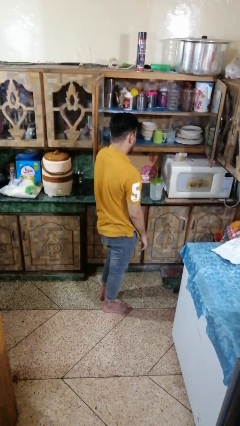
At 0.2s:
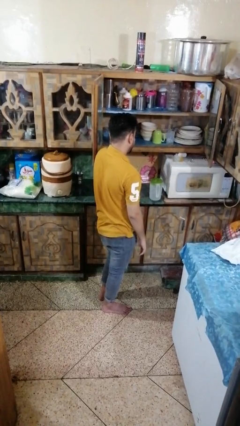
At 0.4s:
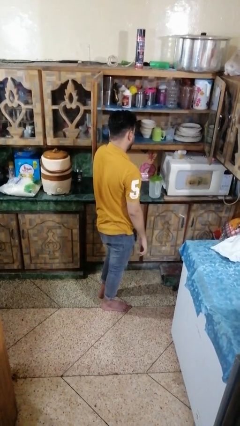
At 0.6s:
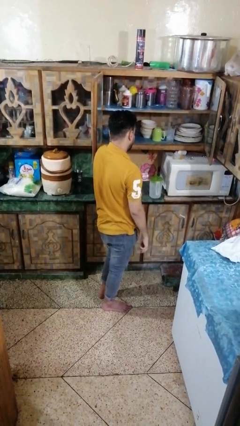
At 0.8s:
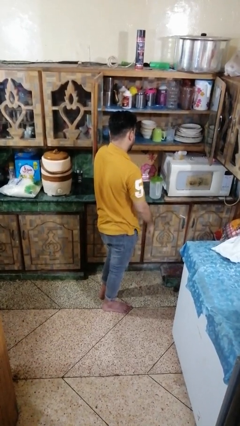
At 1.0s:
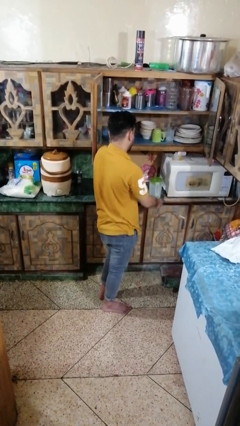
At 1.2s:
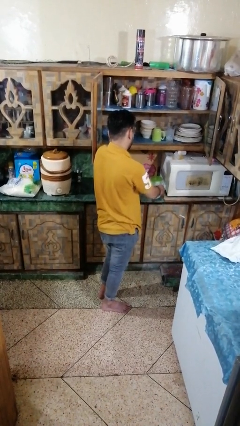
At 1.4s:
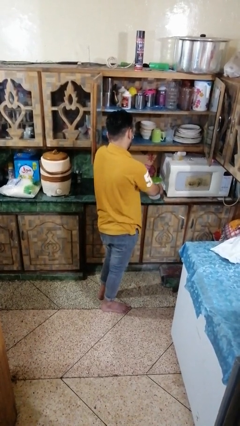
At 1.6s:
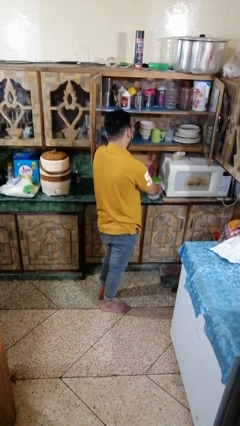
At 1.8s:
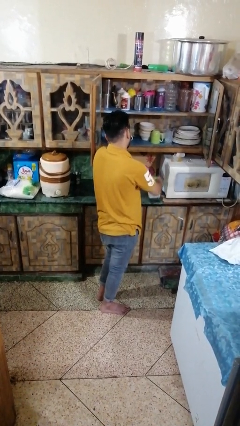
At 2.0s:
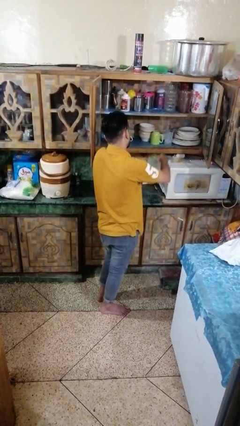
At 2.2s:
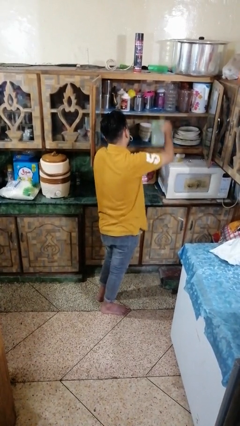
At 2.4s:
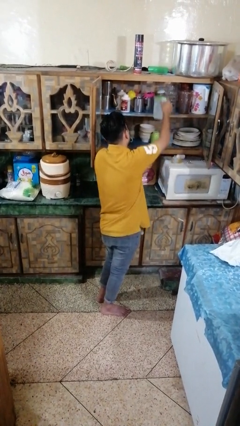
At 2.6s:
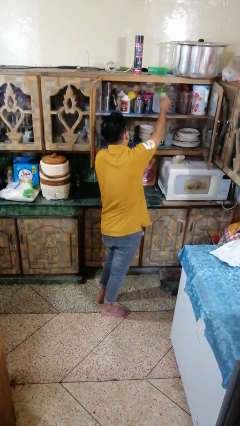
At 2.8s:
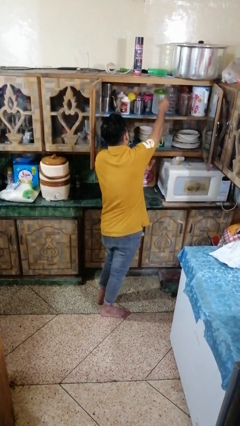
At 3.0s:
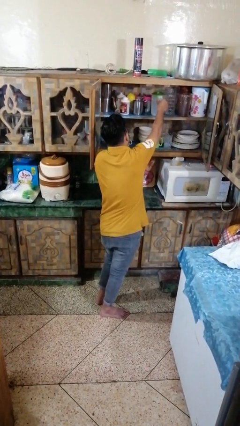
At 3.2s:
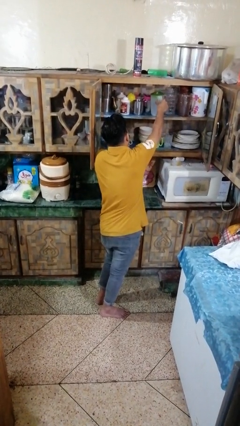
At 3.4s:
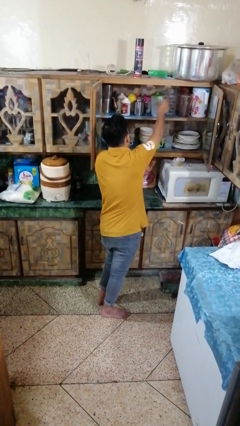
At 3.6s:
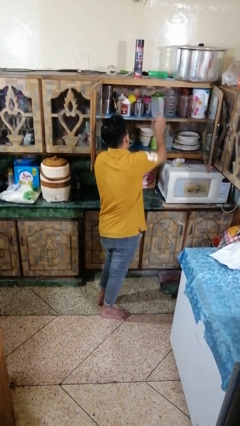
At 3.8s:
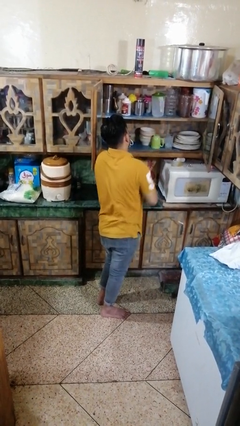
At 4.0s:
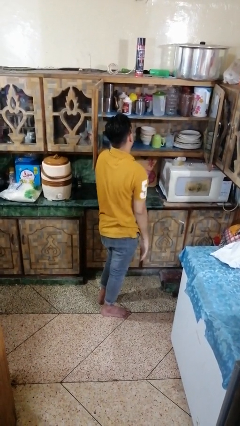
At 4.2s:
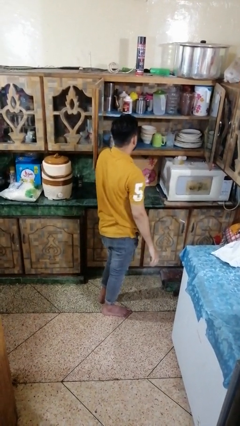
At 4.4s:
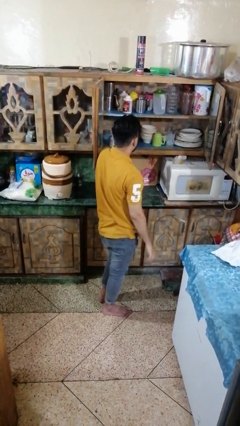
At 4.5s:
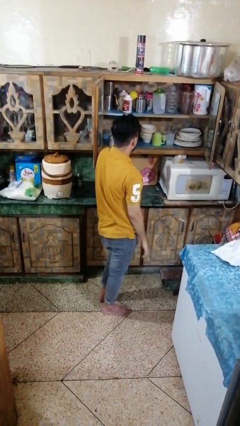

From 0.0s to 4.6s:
person puts object in cabinet

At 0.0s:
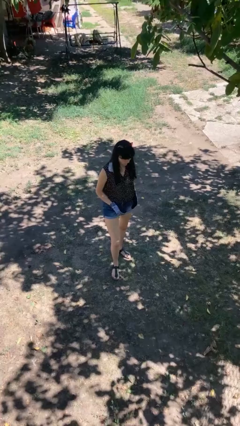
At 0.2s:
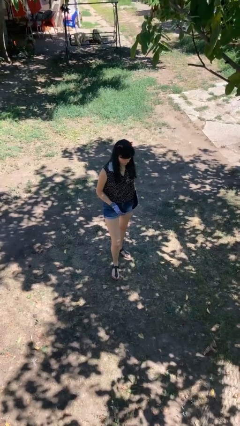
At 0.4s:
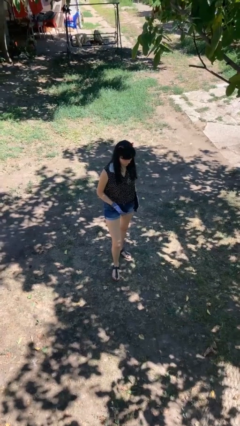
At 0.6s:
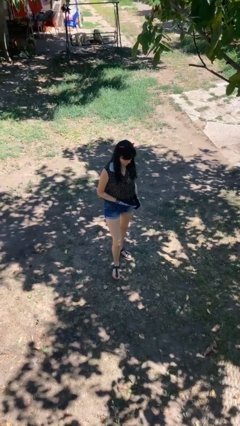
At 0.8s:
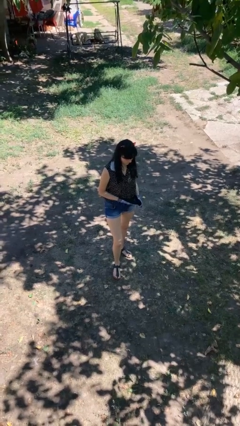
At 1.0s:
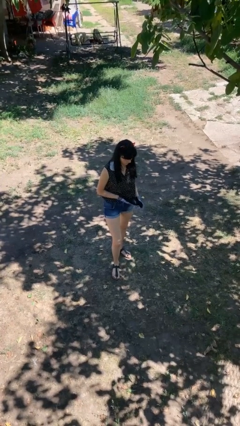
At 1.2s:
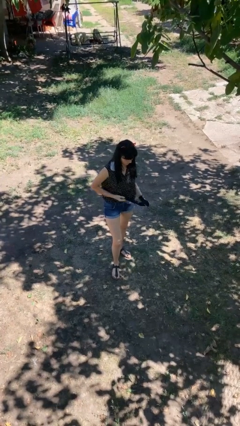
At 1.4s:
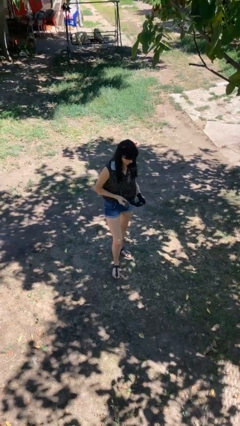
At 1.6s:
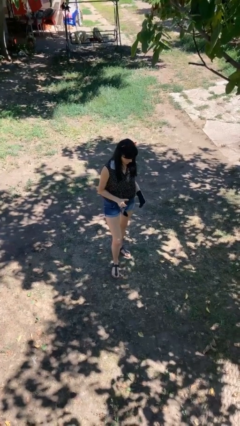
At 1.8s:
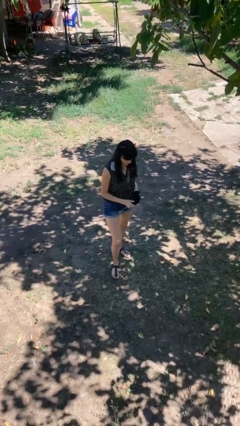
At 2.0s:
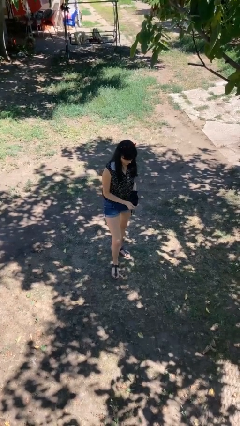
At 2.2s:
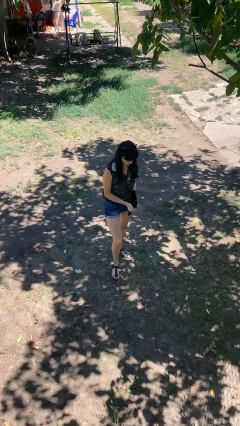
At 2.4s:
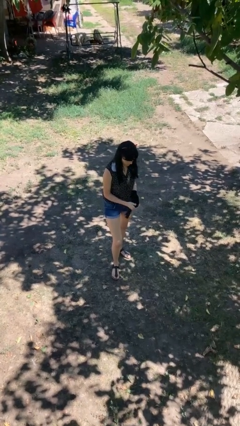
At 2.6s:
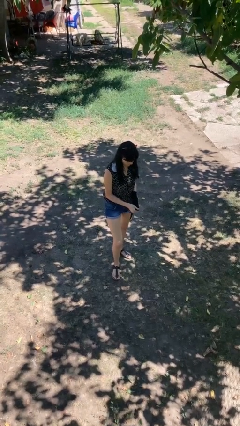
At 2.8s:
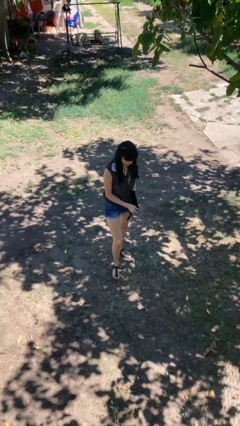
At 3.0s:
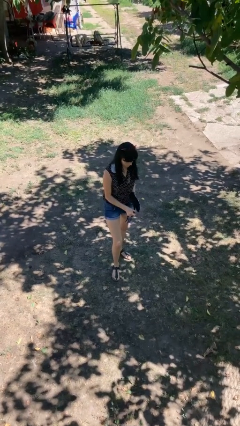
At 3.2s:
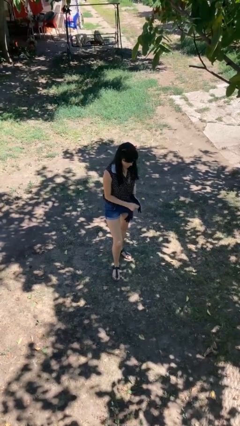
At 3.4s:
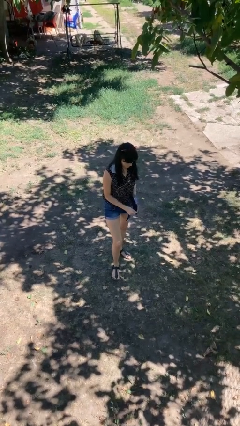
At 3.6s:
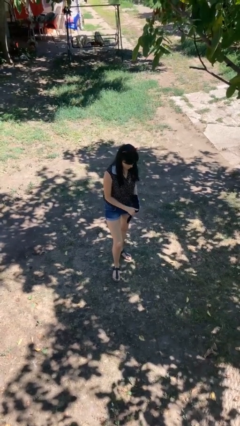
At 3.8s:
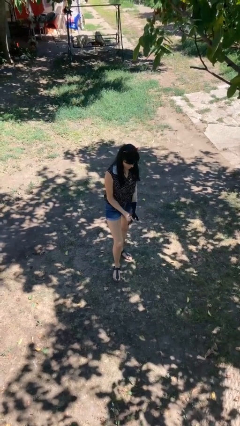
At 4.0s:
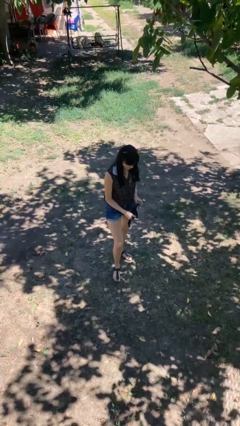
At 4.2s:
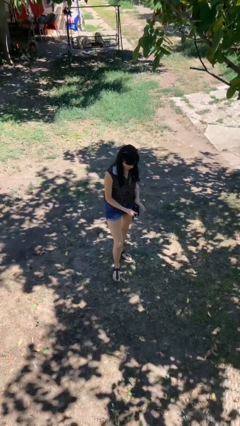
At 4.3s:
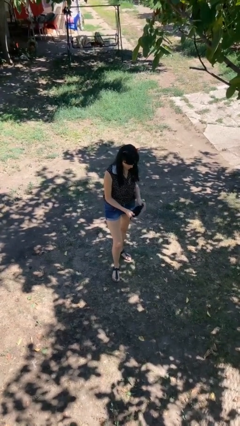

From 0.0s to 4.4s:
person takes off gloves

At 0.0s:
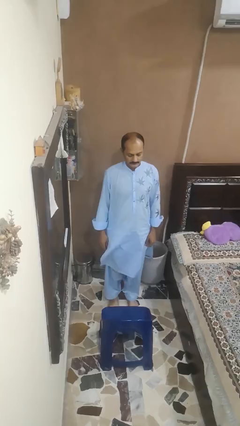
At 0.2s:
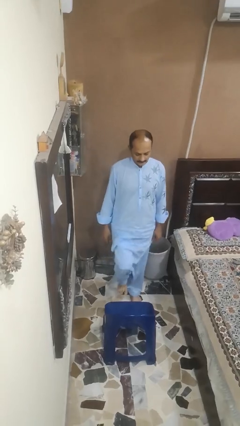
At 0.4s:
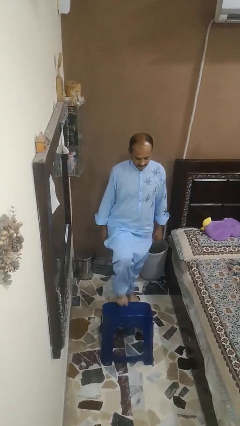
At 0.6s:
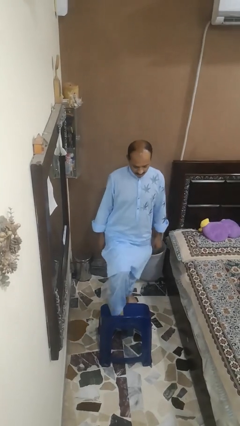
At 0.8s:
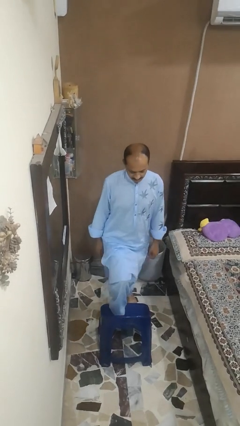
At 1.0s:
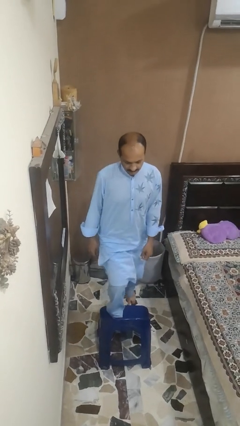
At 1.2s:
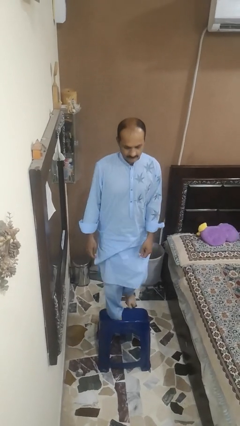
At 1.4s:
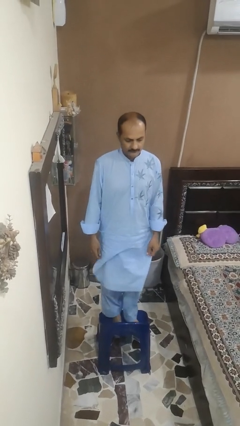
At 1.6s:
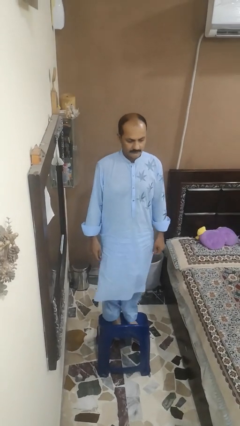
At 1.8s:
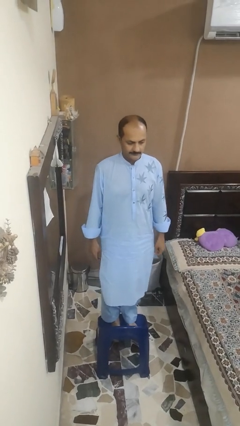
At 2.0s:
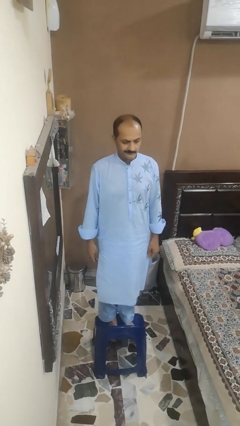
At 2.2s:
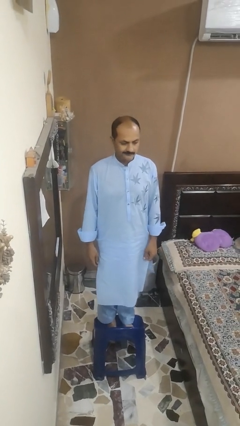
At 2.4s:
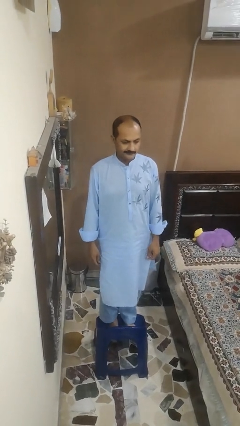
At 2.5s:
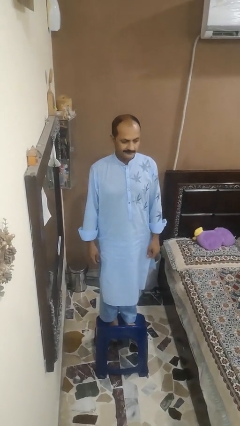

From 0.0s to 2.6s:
person climbs on chair

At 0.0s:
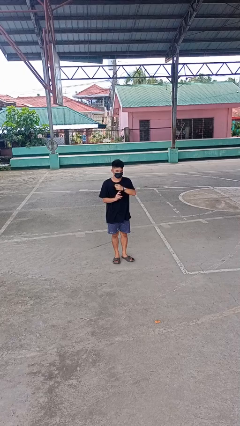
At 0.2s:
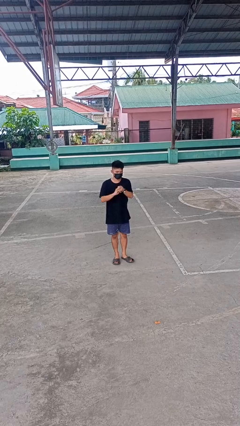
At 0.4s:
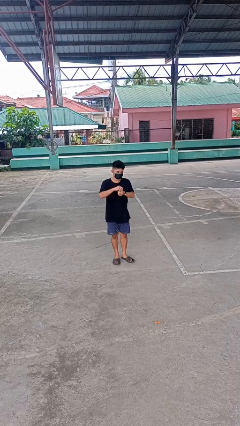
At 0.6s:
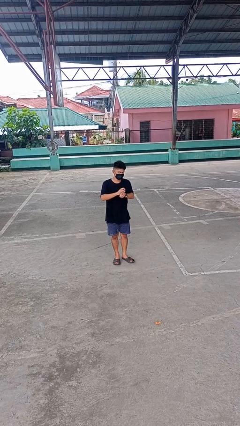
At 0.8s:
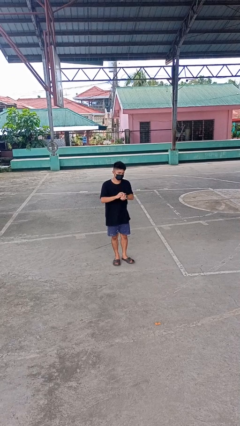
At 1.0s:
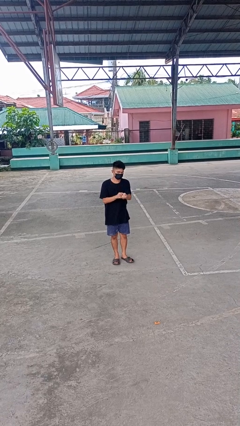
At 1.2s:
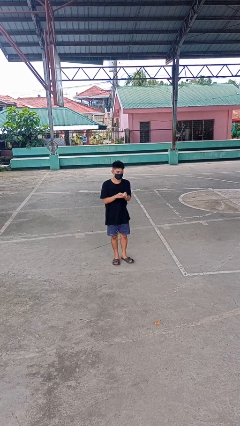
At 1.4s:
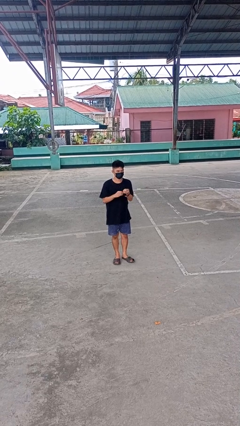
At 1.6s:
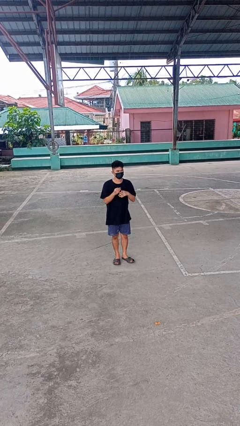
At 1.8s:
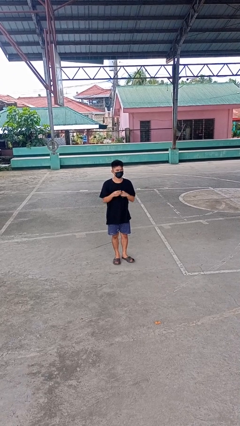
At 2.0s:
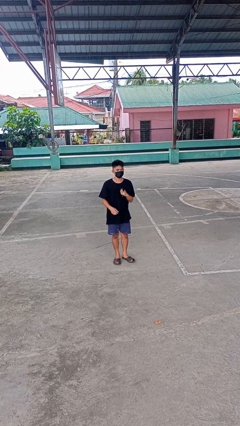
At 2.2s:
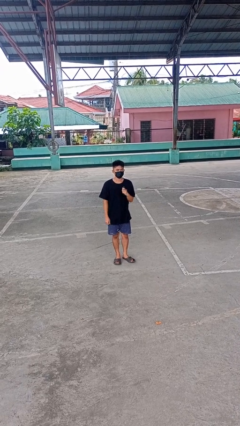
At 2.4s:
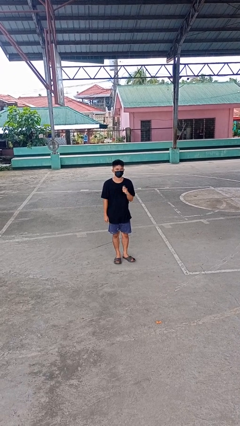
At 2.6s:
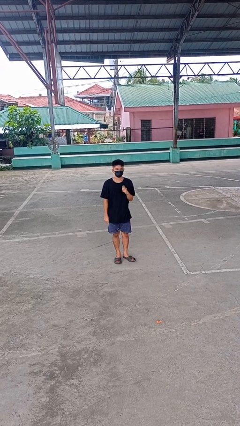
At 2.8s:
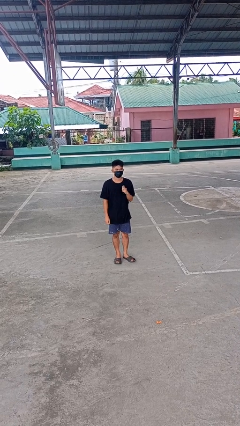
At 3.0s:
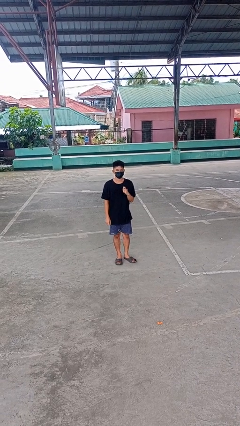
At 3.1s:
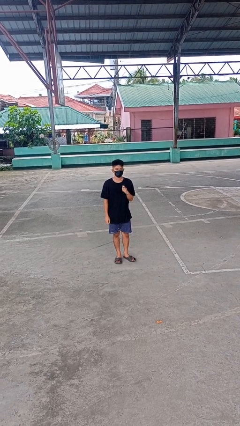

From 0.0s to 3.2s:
person takes off wristwatch

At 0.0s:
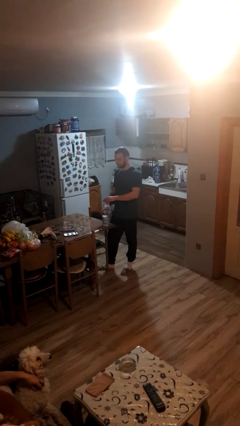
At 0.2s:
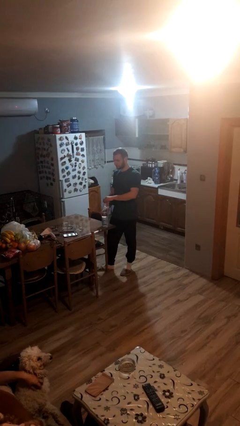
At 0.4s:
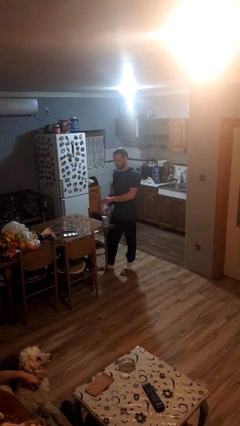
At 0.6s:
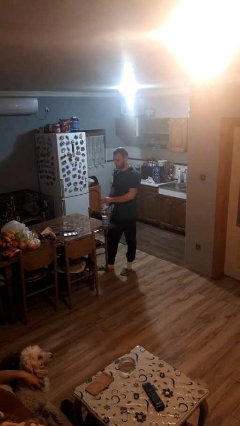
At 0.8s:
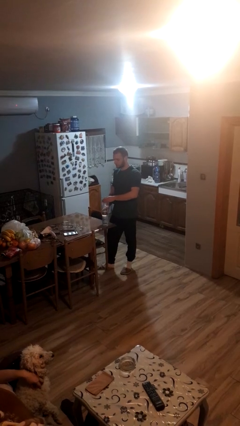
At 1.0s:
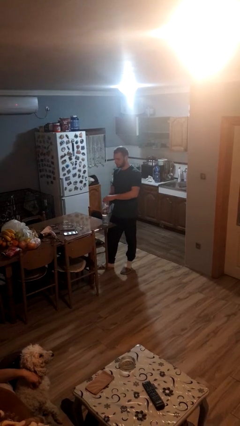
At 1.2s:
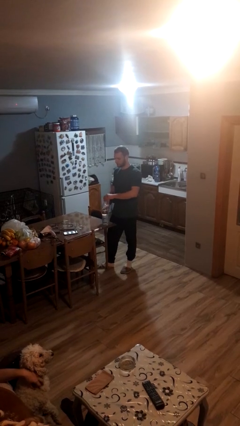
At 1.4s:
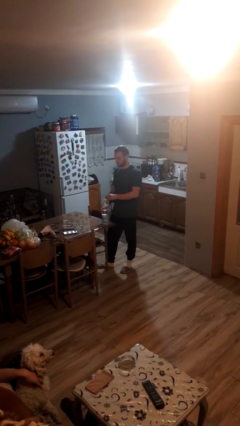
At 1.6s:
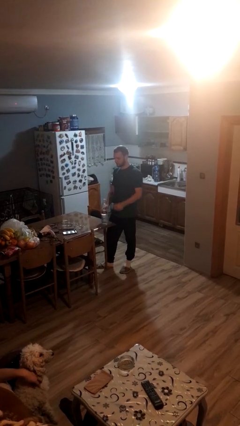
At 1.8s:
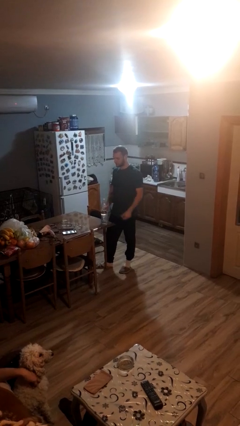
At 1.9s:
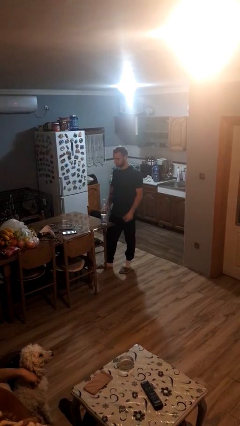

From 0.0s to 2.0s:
person unscrews lid from bottle

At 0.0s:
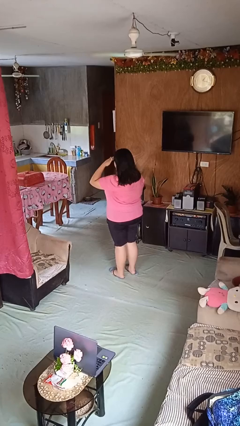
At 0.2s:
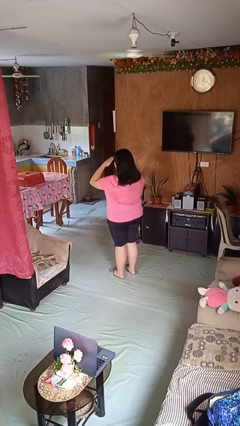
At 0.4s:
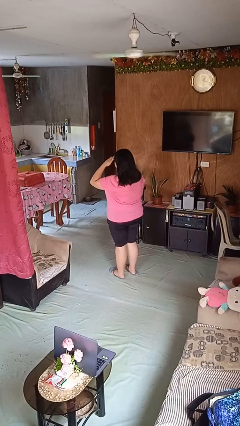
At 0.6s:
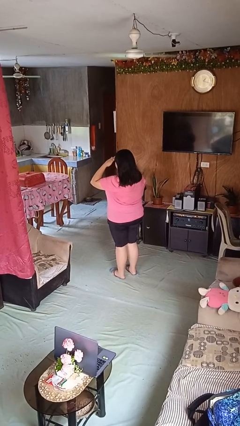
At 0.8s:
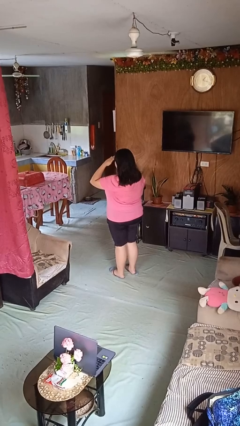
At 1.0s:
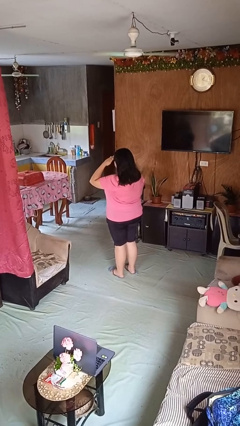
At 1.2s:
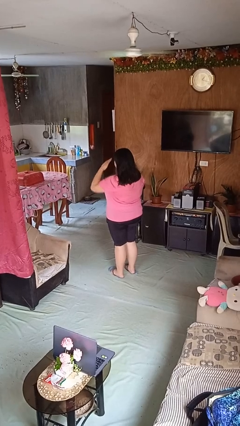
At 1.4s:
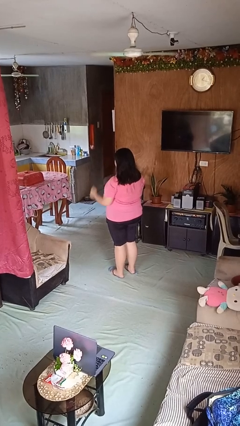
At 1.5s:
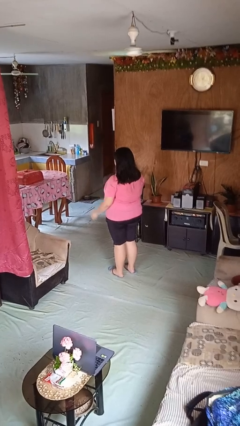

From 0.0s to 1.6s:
person salutes
